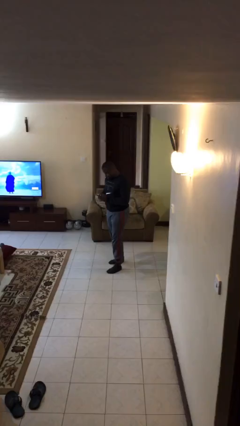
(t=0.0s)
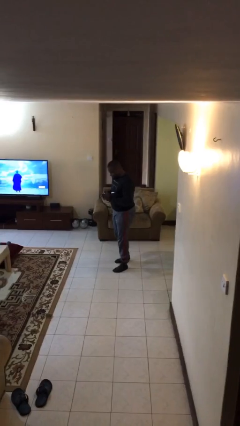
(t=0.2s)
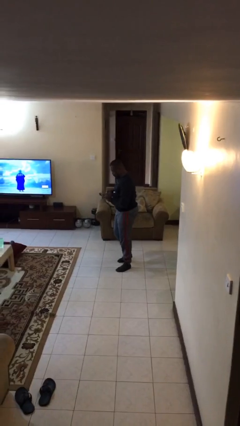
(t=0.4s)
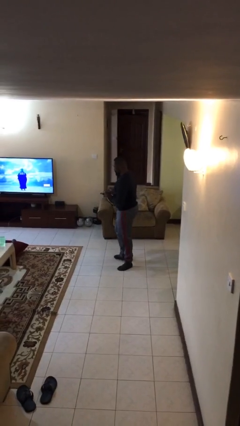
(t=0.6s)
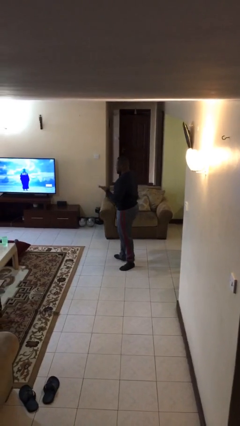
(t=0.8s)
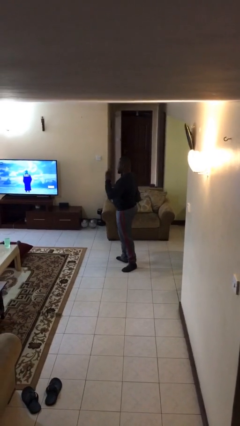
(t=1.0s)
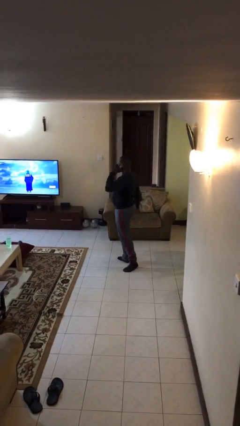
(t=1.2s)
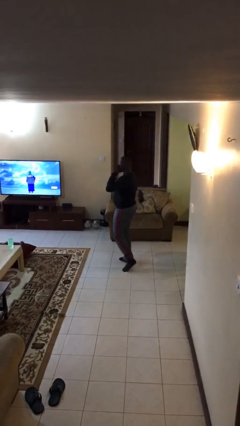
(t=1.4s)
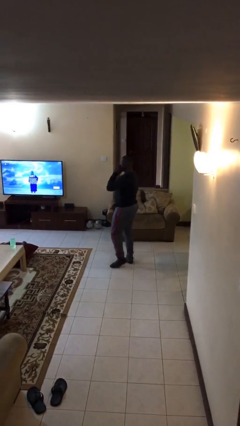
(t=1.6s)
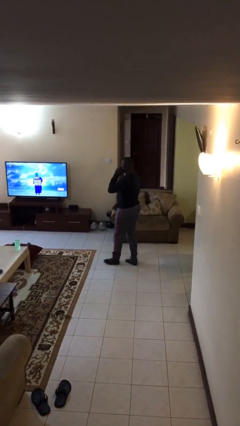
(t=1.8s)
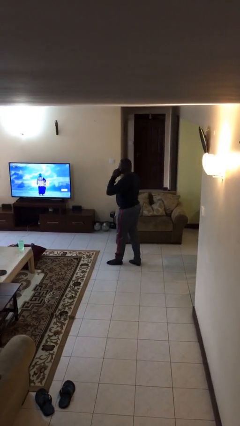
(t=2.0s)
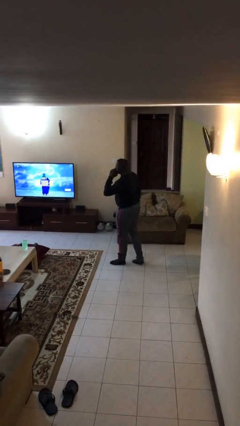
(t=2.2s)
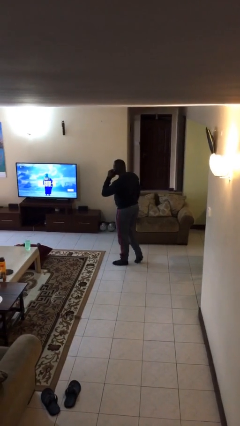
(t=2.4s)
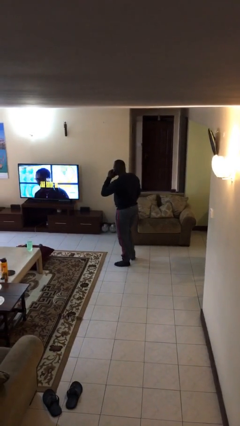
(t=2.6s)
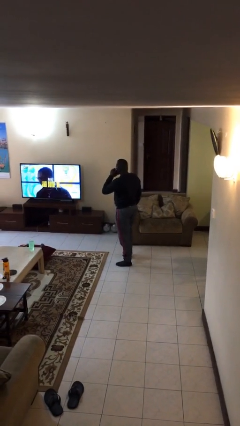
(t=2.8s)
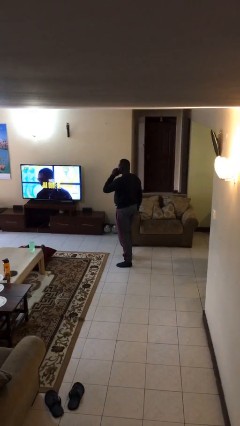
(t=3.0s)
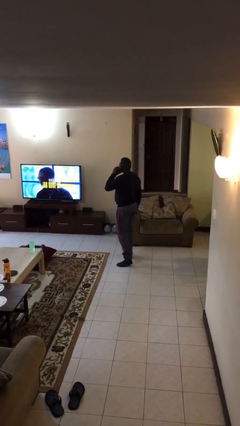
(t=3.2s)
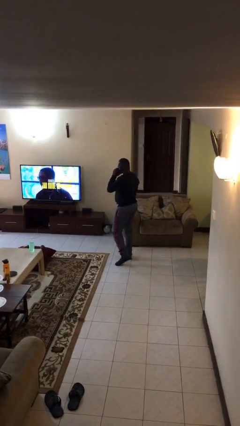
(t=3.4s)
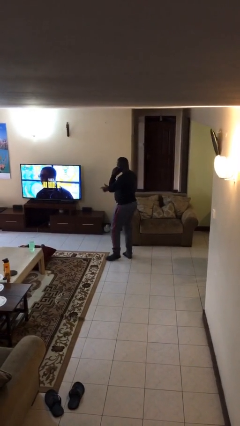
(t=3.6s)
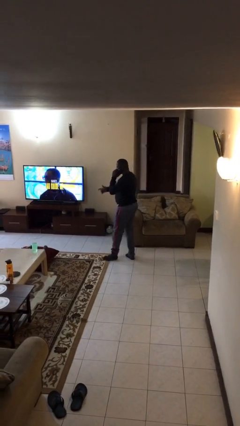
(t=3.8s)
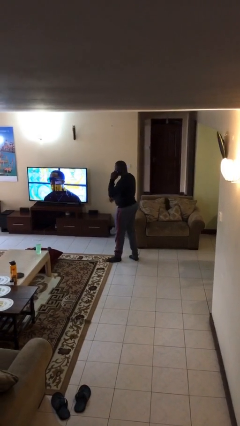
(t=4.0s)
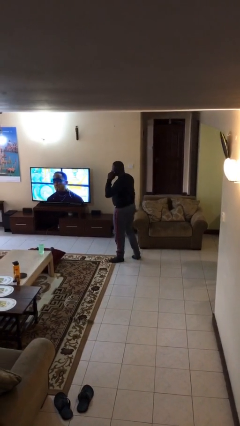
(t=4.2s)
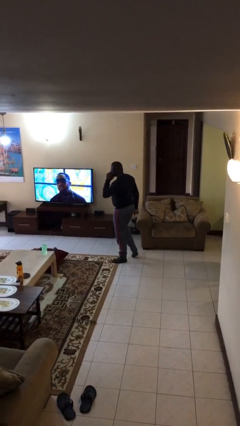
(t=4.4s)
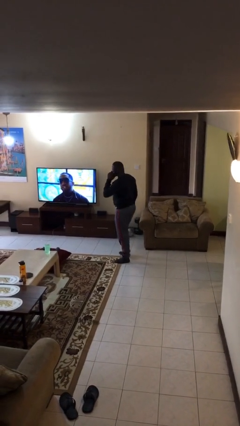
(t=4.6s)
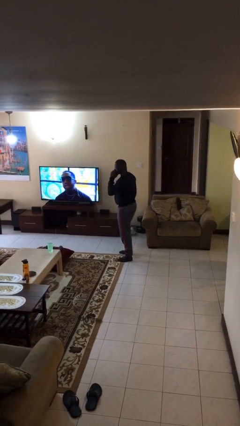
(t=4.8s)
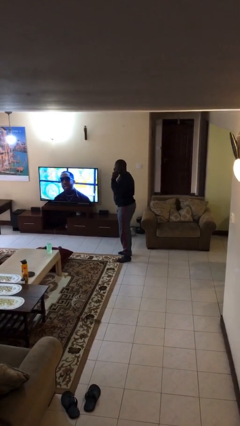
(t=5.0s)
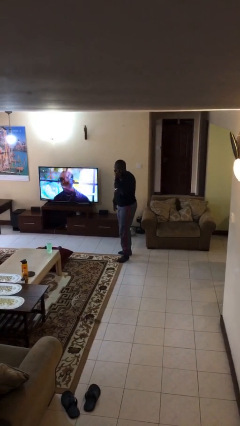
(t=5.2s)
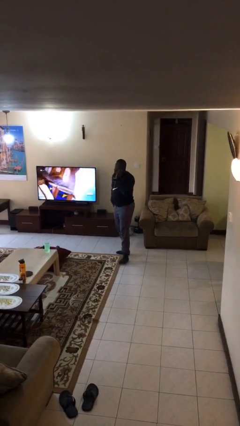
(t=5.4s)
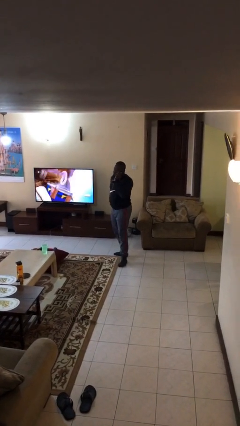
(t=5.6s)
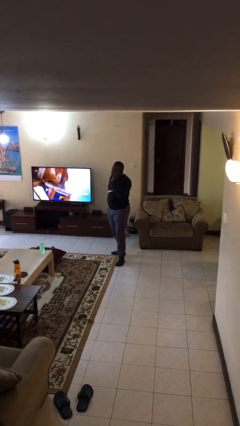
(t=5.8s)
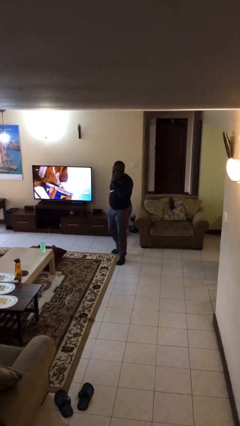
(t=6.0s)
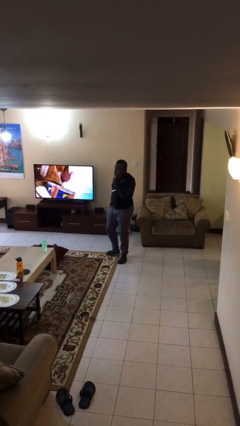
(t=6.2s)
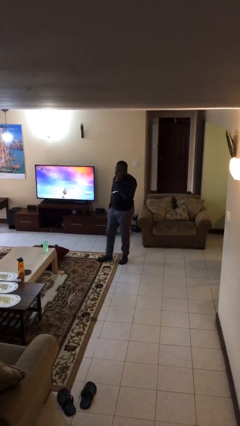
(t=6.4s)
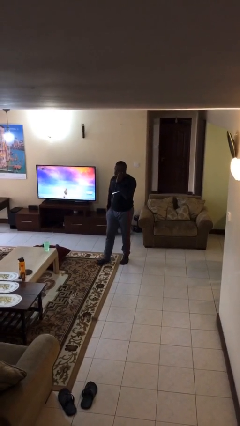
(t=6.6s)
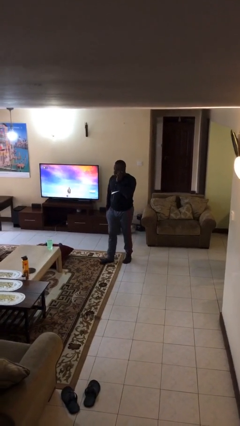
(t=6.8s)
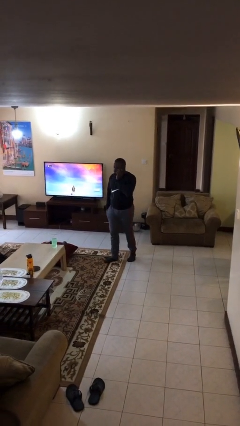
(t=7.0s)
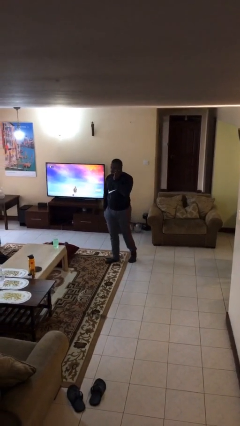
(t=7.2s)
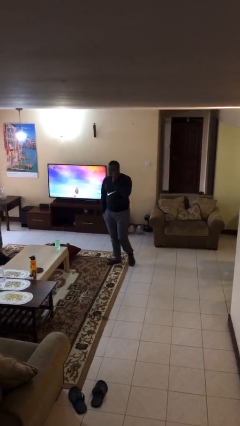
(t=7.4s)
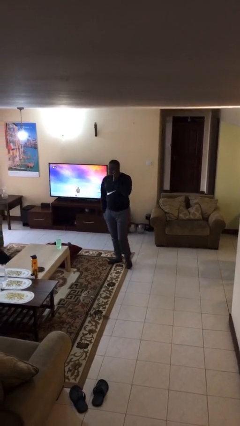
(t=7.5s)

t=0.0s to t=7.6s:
person talks on phone

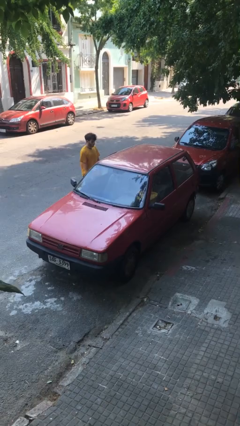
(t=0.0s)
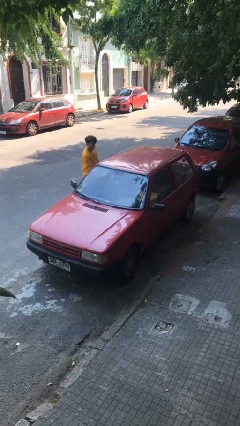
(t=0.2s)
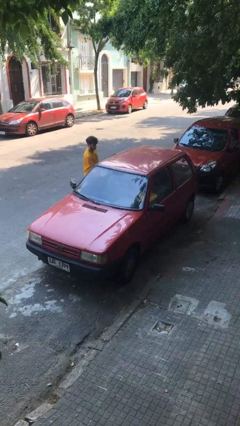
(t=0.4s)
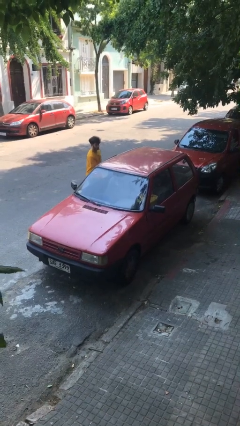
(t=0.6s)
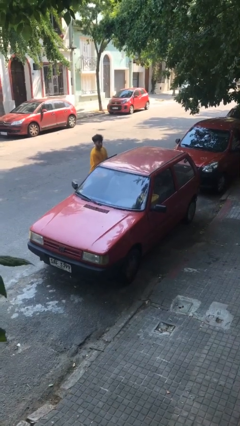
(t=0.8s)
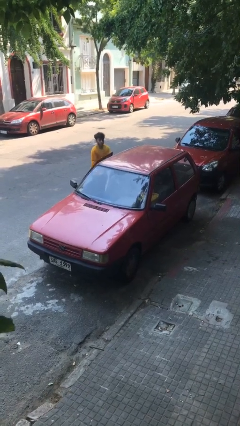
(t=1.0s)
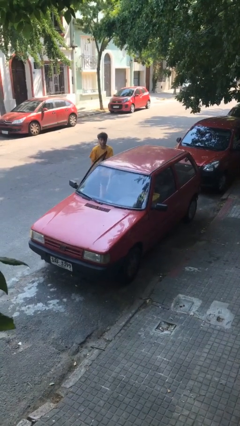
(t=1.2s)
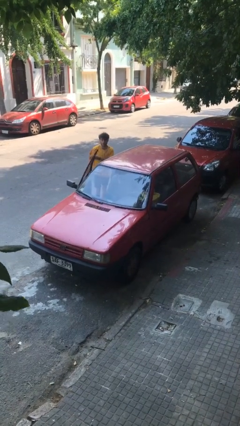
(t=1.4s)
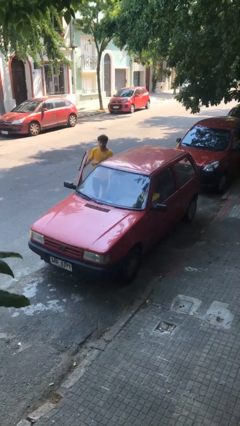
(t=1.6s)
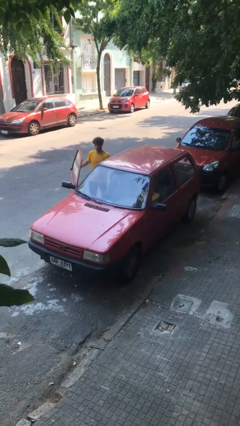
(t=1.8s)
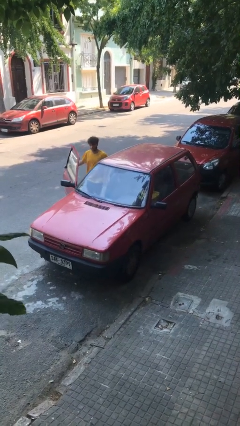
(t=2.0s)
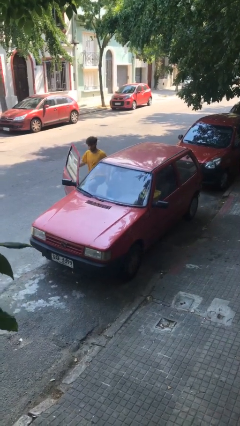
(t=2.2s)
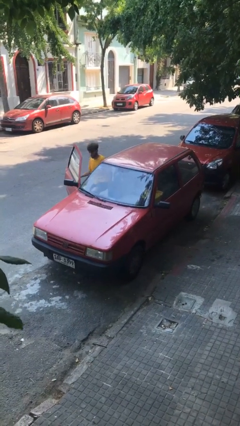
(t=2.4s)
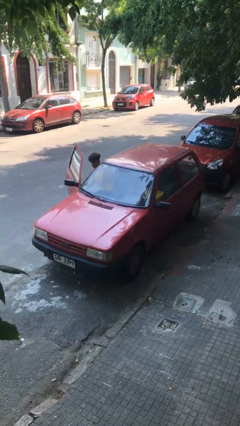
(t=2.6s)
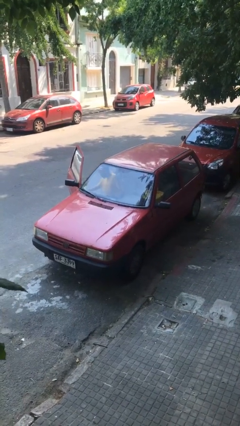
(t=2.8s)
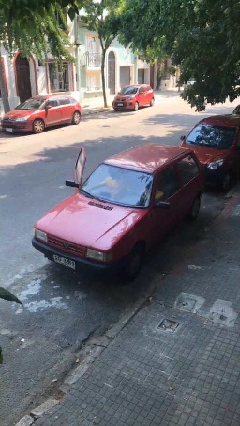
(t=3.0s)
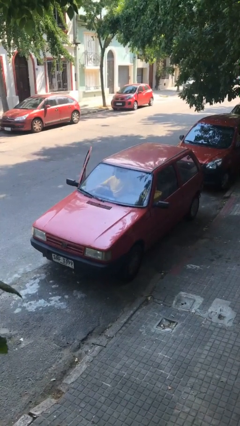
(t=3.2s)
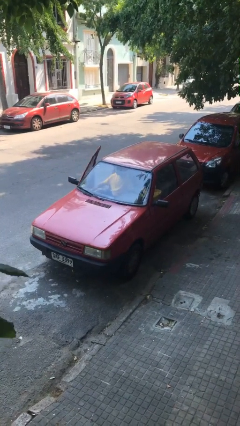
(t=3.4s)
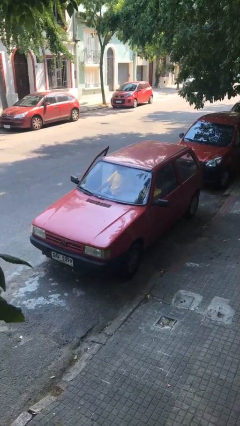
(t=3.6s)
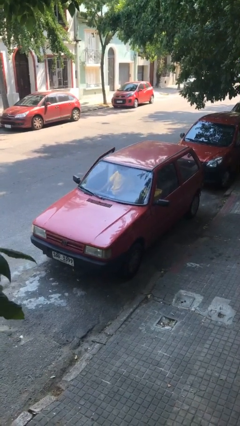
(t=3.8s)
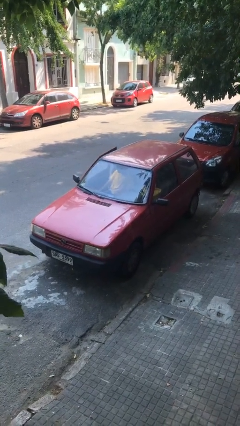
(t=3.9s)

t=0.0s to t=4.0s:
car picks up person

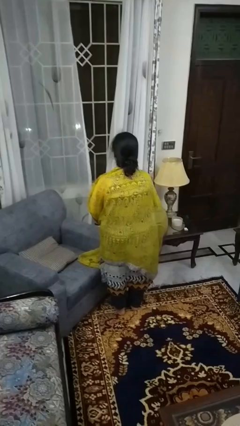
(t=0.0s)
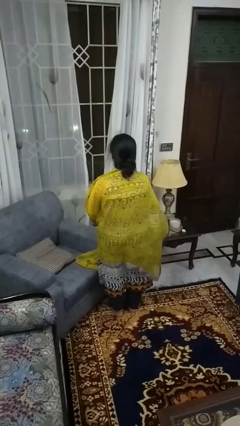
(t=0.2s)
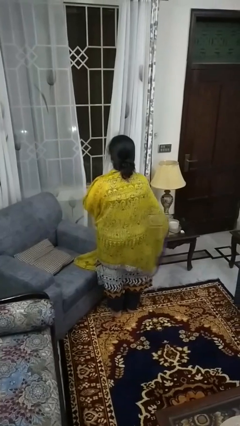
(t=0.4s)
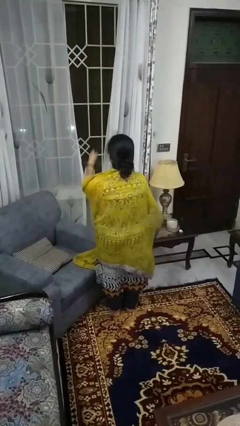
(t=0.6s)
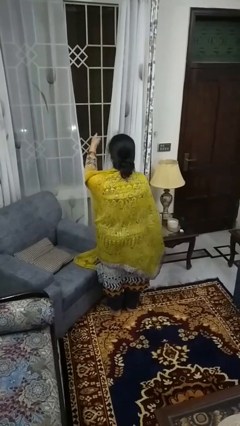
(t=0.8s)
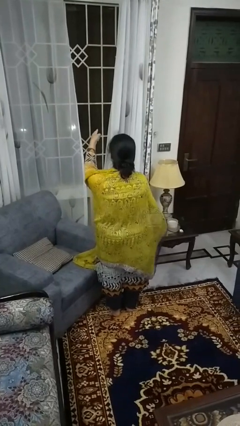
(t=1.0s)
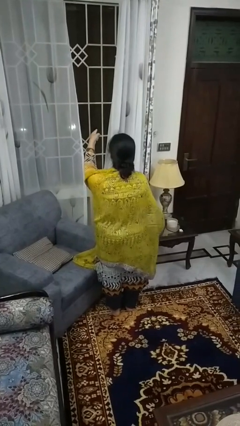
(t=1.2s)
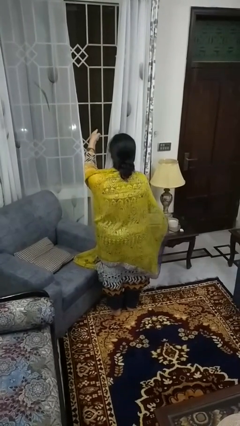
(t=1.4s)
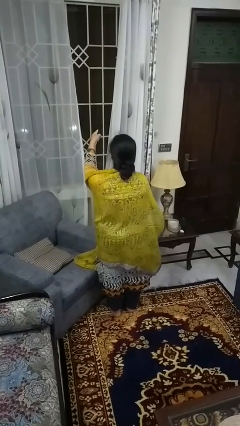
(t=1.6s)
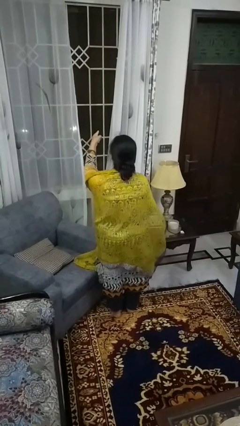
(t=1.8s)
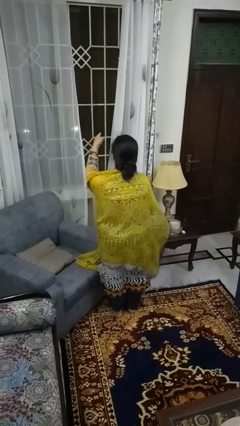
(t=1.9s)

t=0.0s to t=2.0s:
person points at person

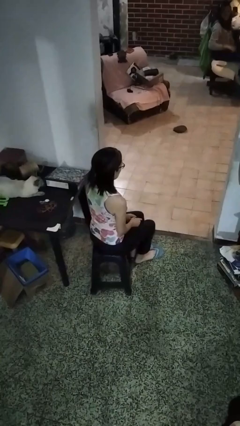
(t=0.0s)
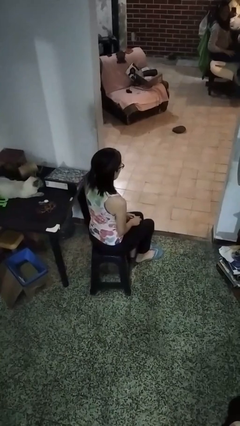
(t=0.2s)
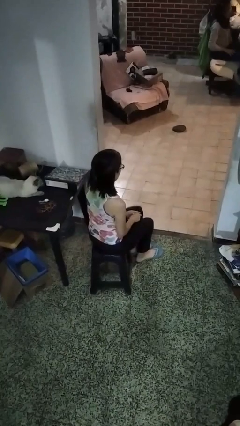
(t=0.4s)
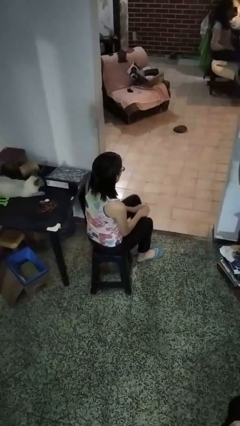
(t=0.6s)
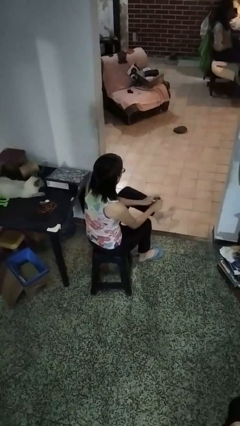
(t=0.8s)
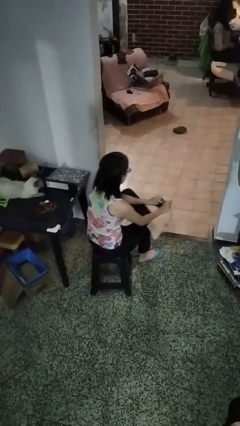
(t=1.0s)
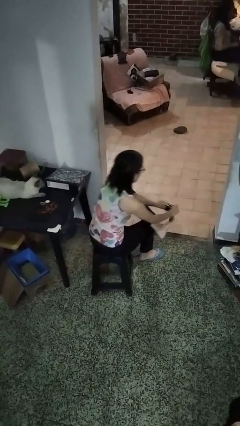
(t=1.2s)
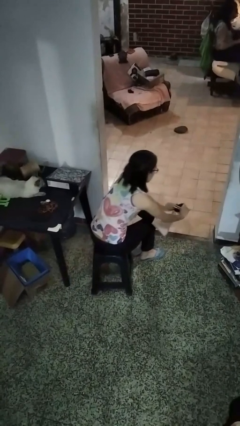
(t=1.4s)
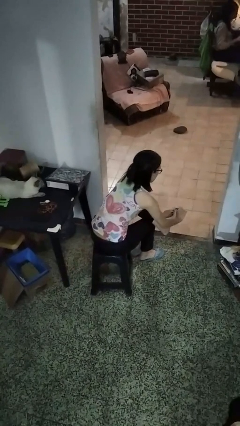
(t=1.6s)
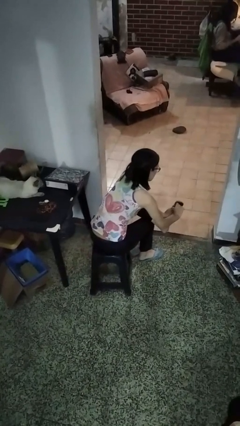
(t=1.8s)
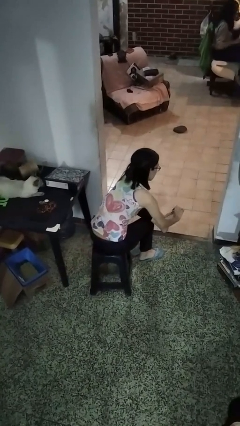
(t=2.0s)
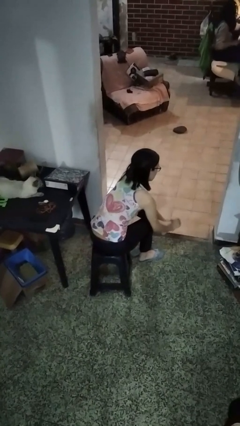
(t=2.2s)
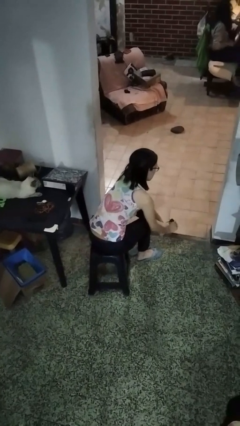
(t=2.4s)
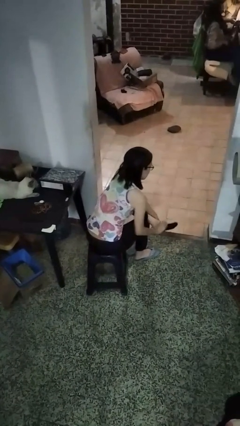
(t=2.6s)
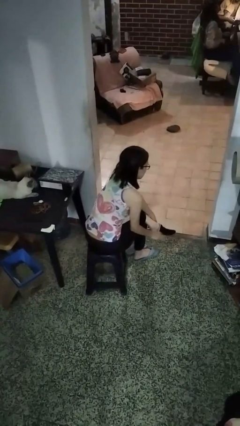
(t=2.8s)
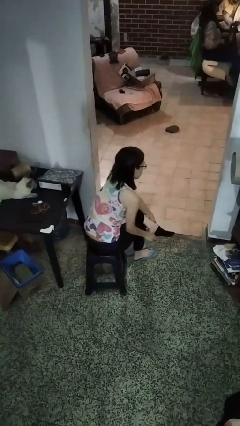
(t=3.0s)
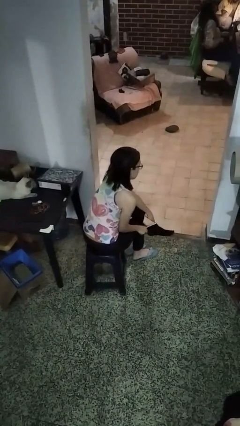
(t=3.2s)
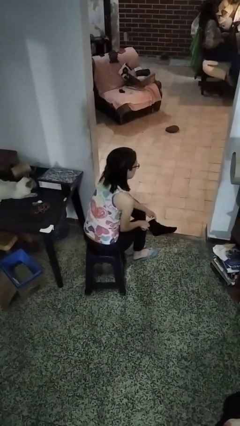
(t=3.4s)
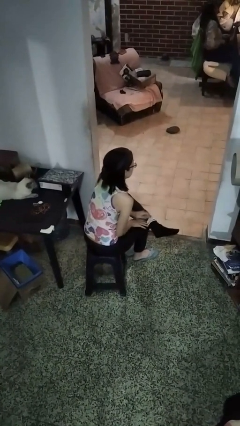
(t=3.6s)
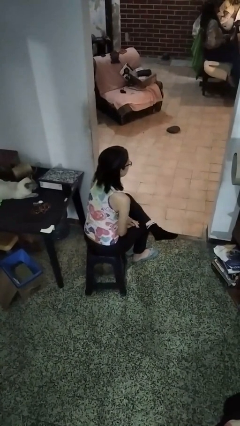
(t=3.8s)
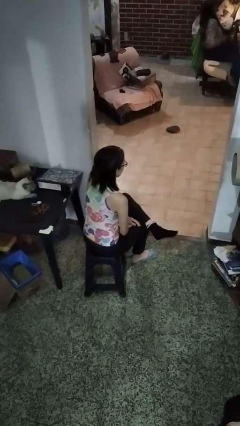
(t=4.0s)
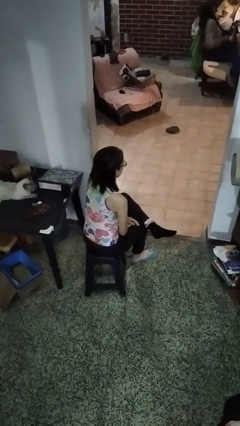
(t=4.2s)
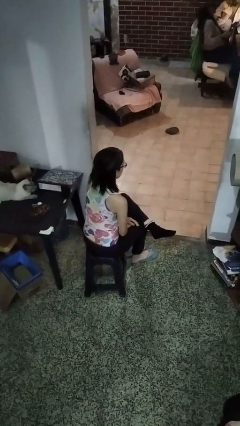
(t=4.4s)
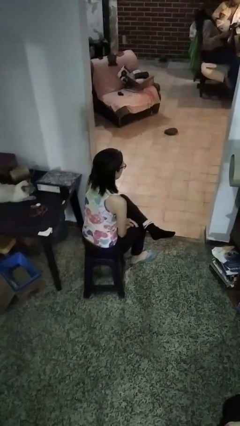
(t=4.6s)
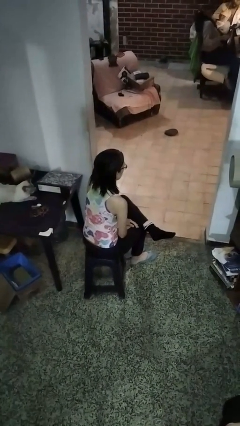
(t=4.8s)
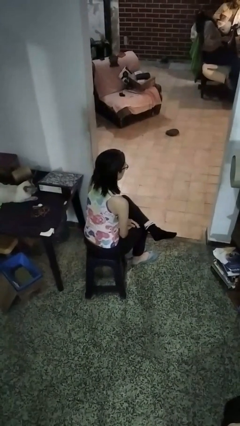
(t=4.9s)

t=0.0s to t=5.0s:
person puts on socks
